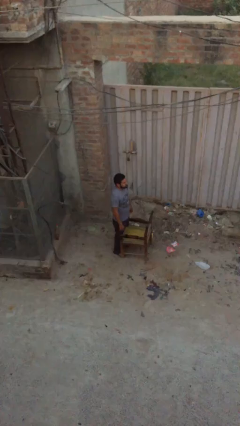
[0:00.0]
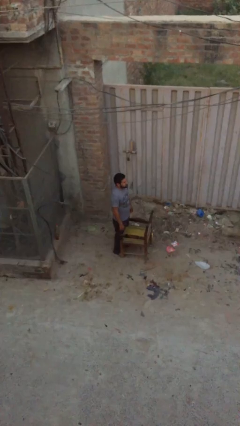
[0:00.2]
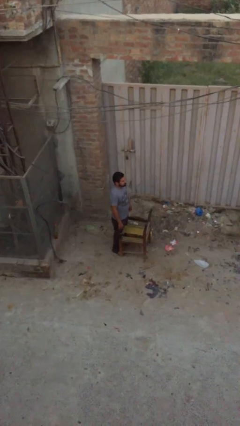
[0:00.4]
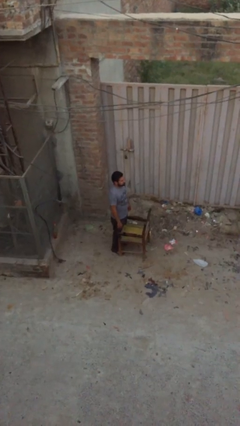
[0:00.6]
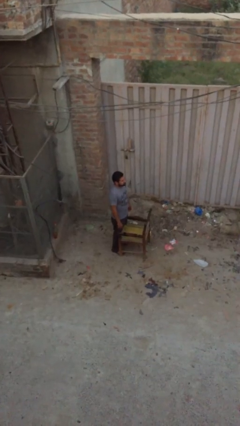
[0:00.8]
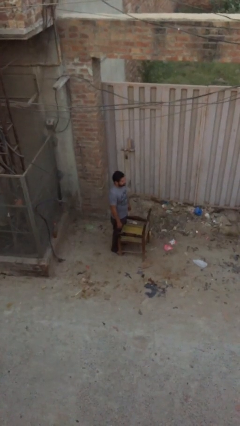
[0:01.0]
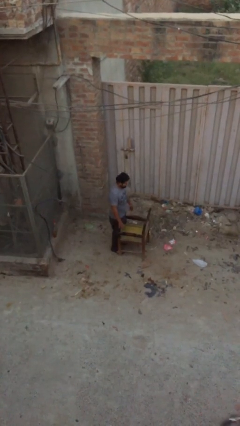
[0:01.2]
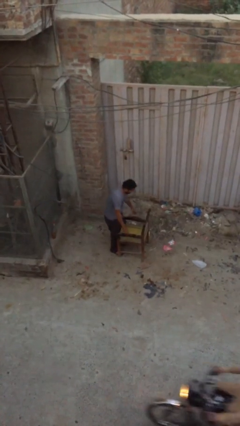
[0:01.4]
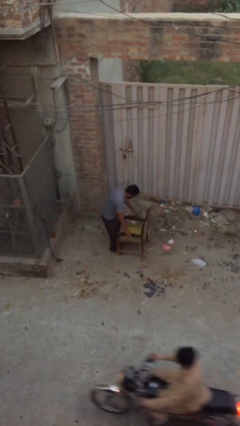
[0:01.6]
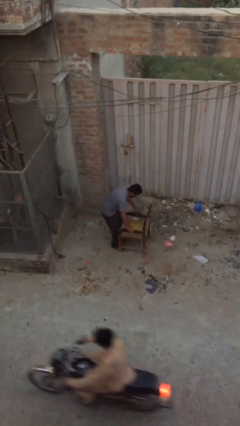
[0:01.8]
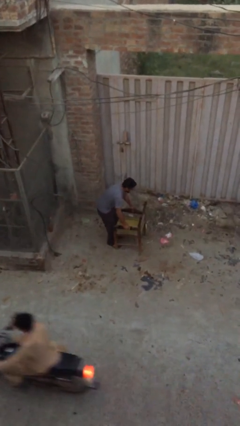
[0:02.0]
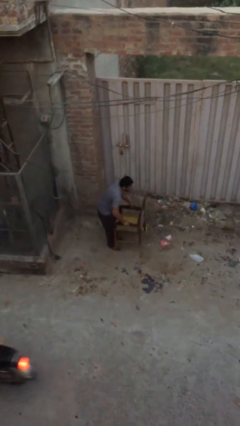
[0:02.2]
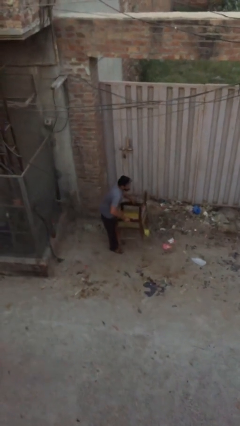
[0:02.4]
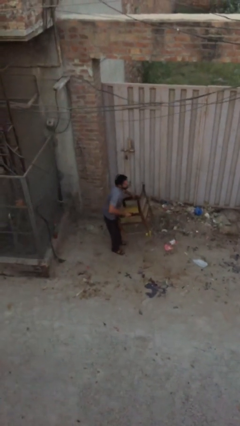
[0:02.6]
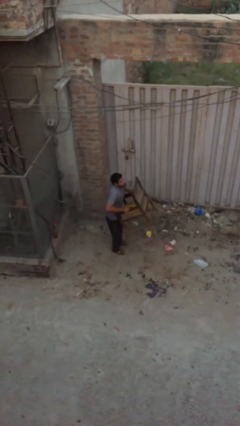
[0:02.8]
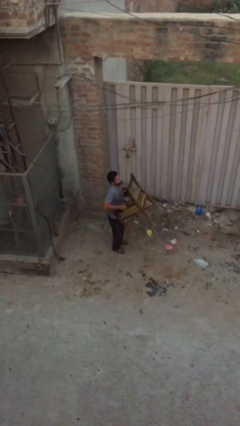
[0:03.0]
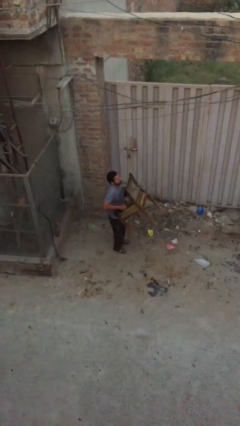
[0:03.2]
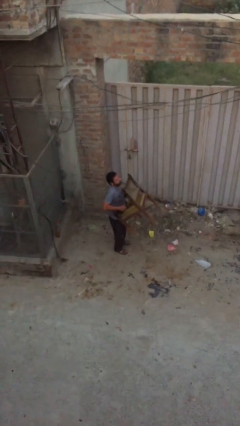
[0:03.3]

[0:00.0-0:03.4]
person picks up object from floor

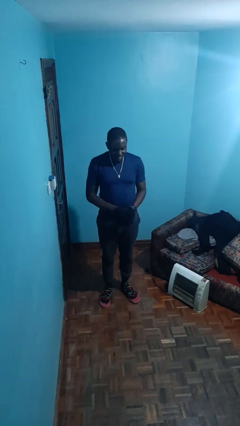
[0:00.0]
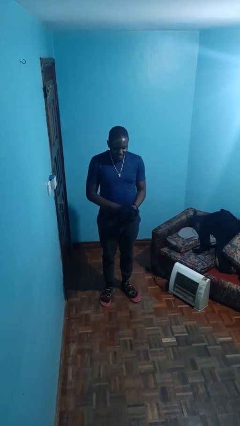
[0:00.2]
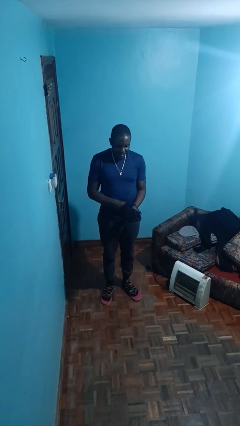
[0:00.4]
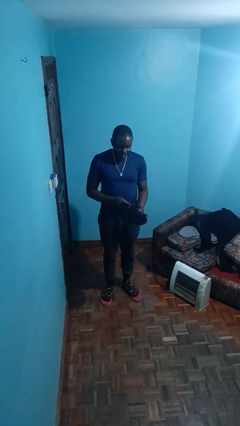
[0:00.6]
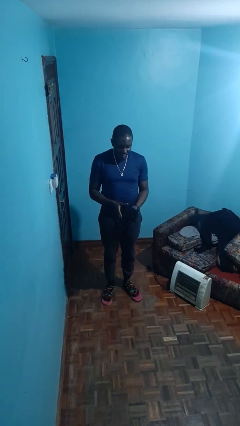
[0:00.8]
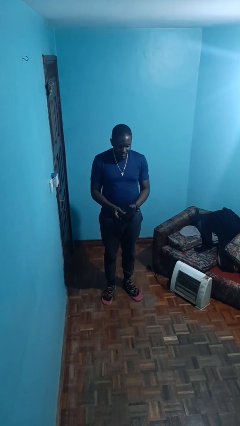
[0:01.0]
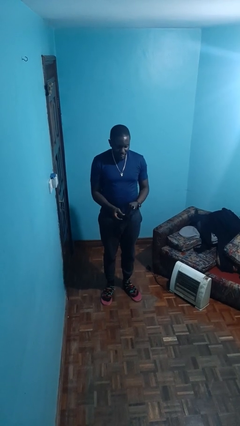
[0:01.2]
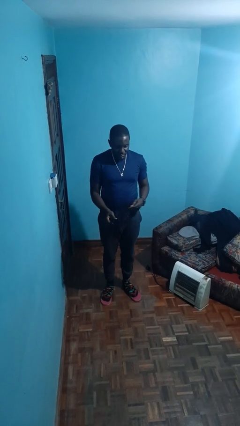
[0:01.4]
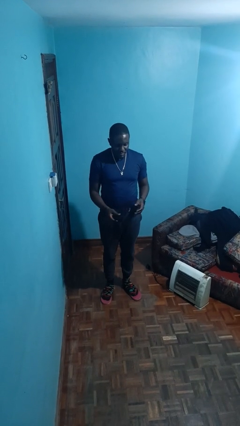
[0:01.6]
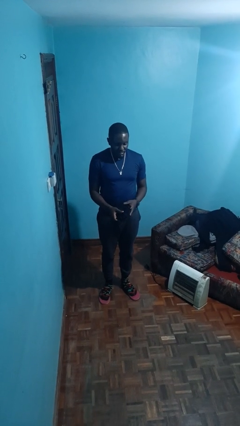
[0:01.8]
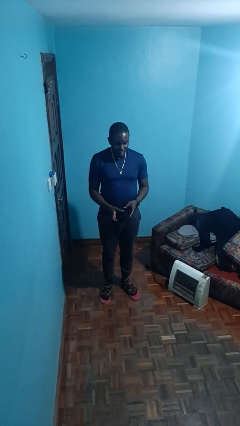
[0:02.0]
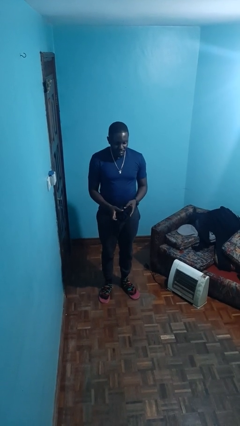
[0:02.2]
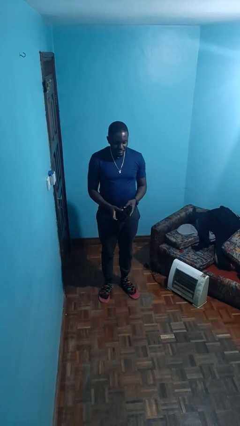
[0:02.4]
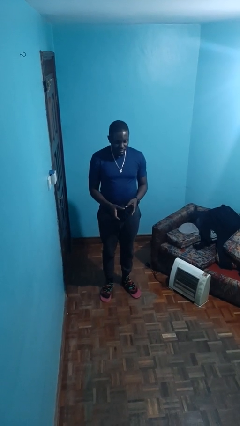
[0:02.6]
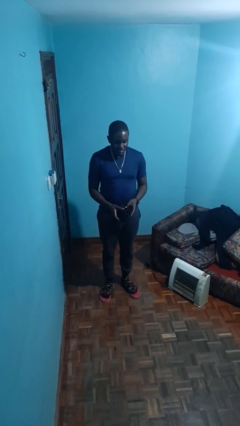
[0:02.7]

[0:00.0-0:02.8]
person takes off gloves

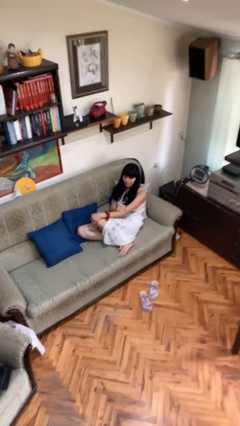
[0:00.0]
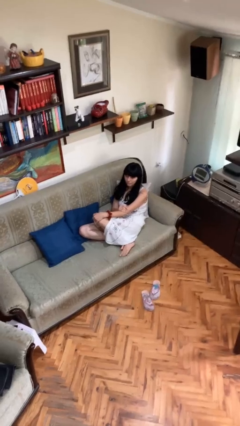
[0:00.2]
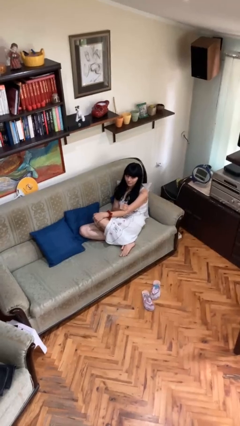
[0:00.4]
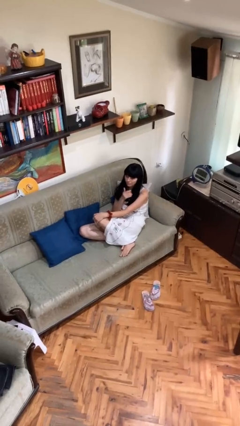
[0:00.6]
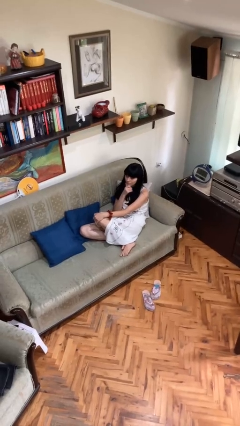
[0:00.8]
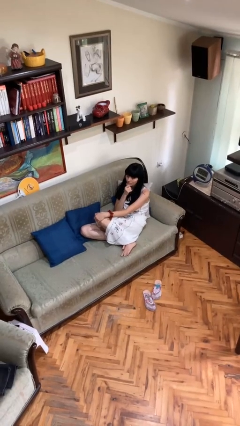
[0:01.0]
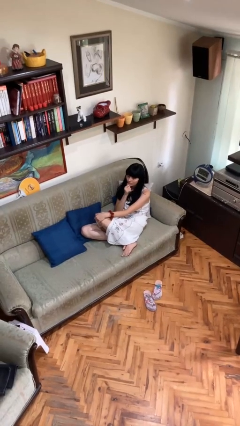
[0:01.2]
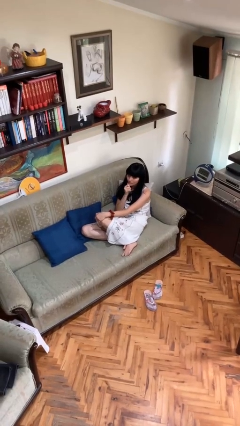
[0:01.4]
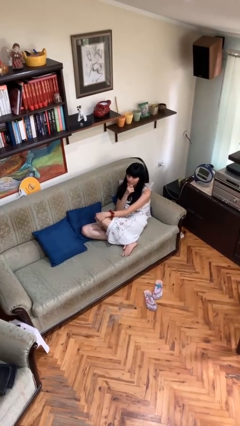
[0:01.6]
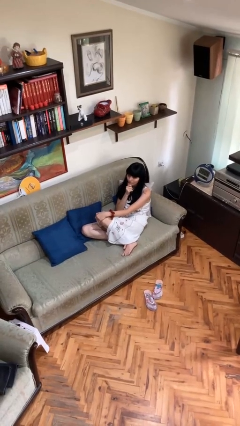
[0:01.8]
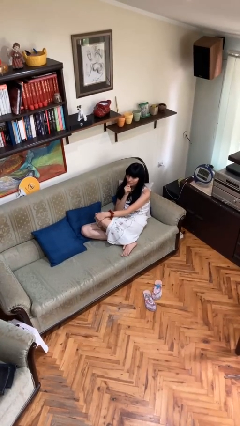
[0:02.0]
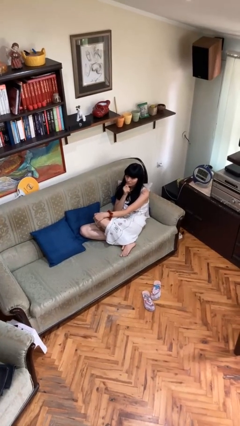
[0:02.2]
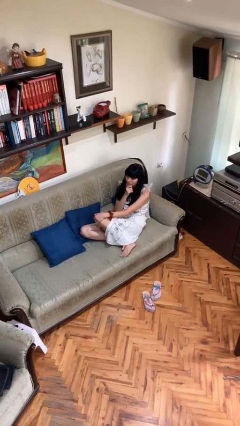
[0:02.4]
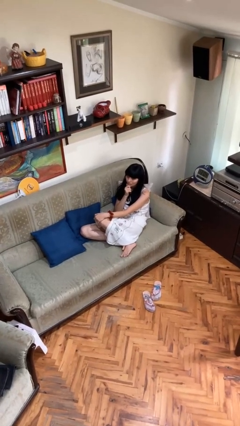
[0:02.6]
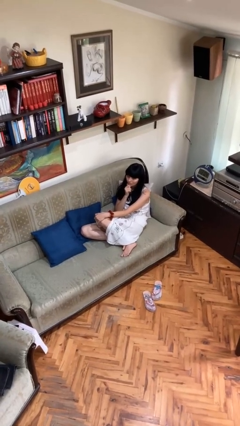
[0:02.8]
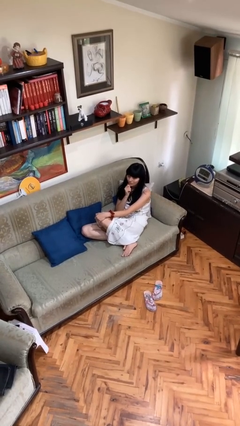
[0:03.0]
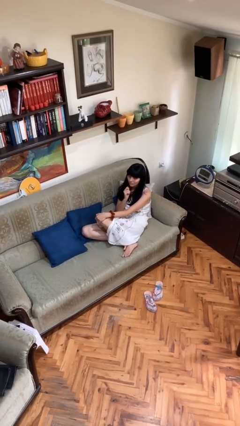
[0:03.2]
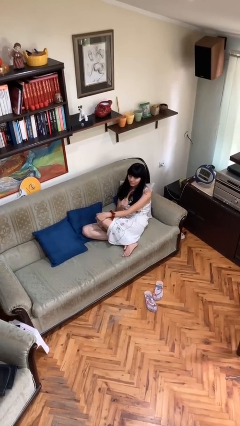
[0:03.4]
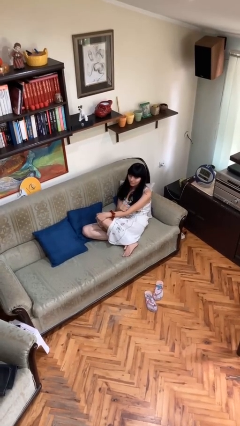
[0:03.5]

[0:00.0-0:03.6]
person strokes chin

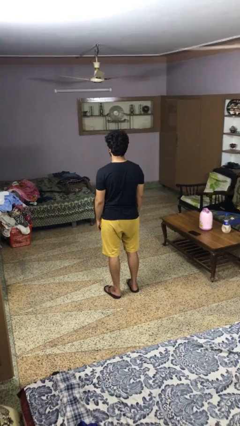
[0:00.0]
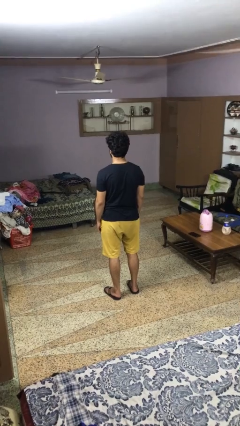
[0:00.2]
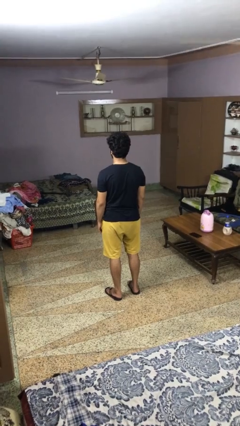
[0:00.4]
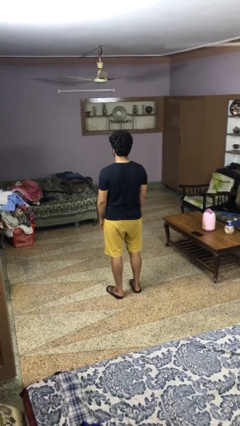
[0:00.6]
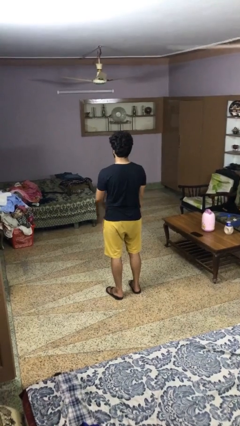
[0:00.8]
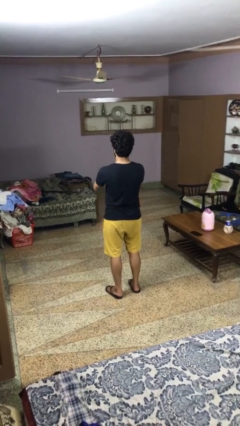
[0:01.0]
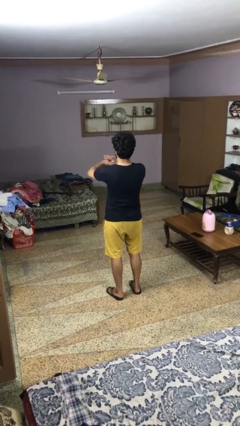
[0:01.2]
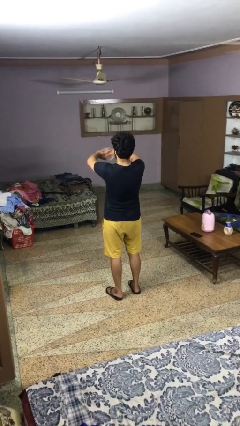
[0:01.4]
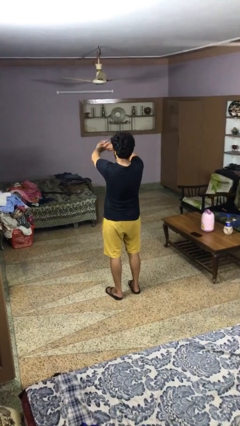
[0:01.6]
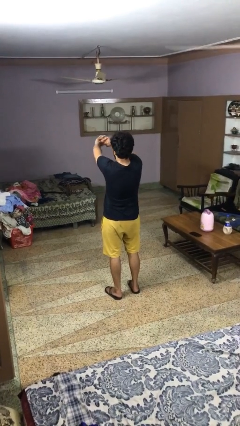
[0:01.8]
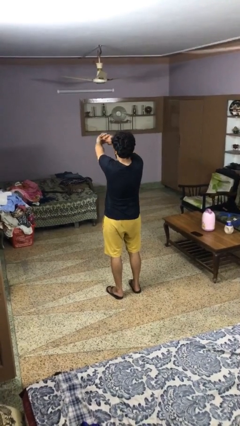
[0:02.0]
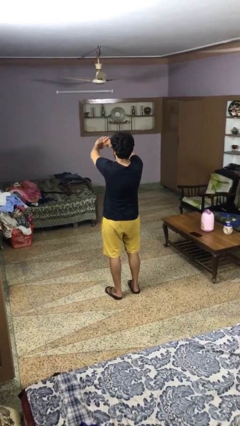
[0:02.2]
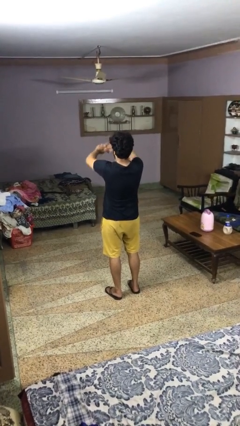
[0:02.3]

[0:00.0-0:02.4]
person cracks knuckles

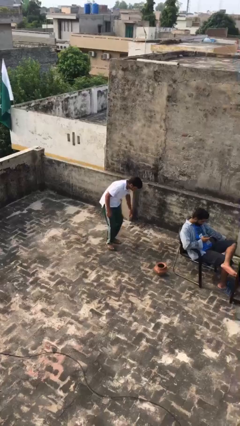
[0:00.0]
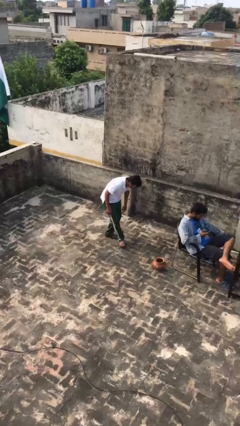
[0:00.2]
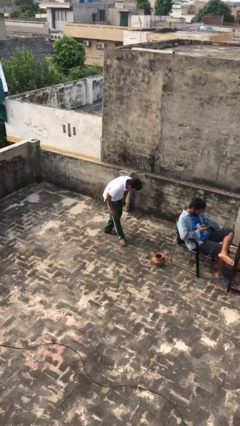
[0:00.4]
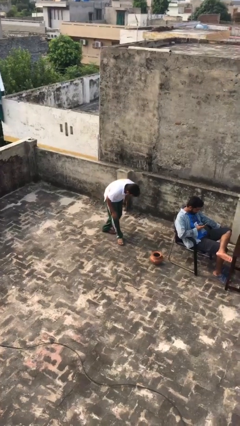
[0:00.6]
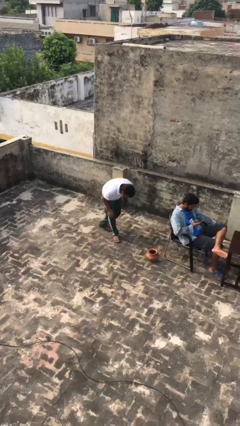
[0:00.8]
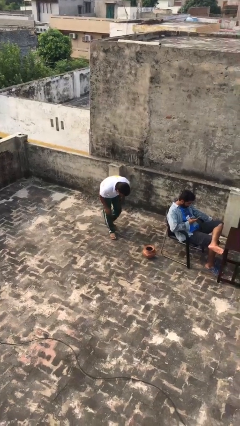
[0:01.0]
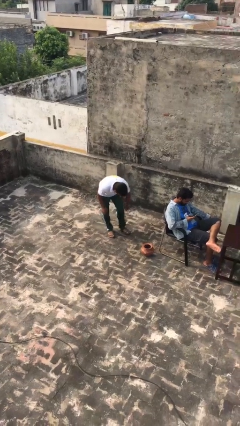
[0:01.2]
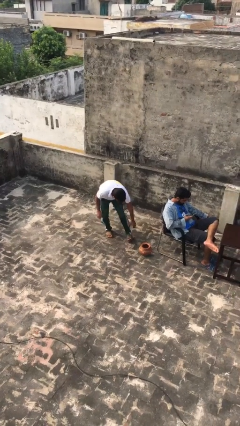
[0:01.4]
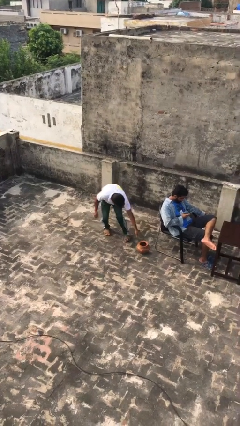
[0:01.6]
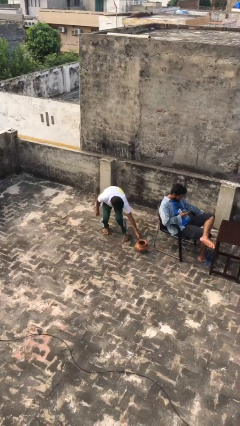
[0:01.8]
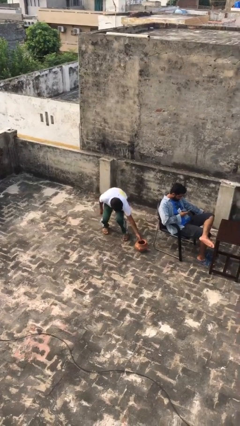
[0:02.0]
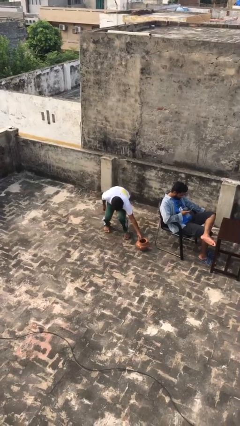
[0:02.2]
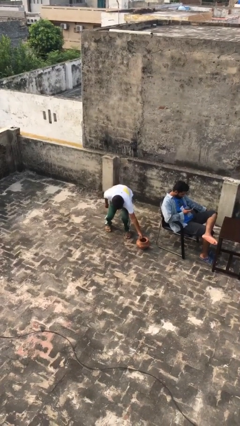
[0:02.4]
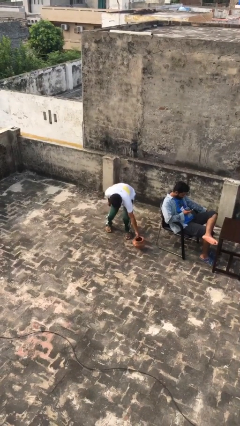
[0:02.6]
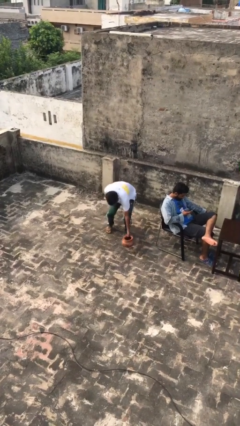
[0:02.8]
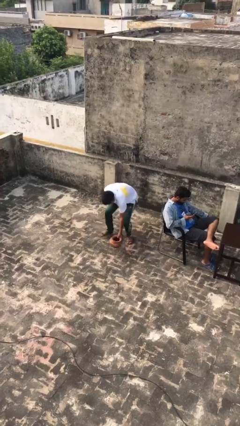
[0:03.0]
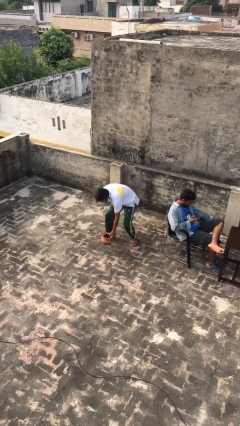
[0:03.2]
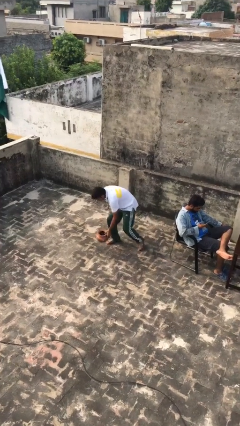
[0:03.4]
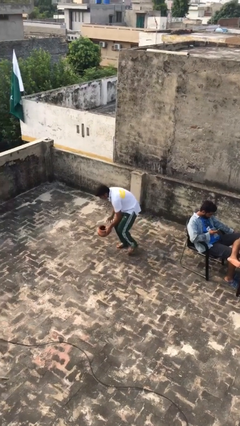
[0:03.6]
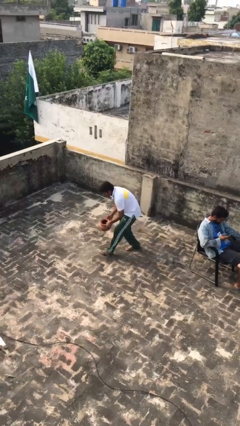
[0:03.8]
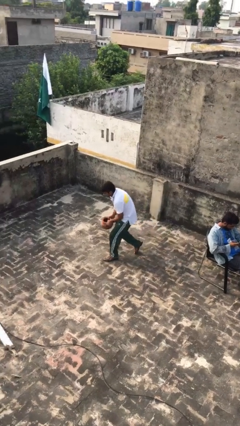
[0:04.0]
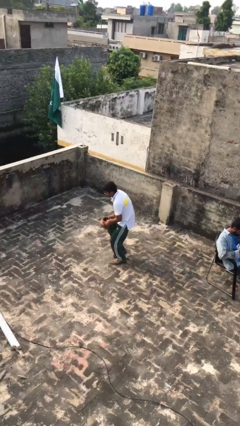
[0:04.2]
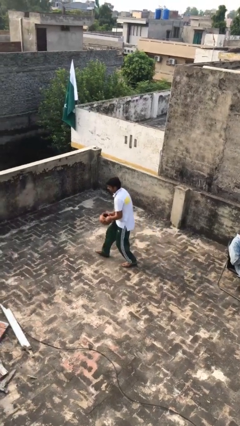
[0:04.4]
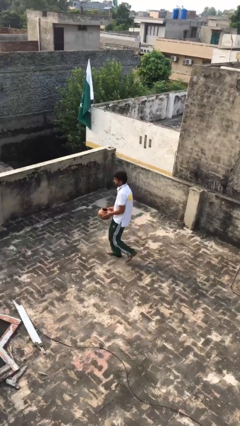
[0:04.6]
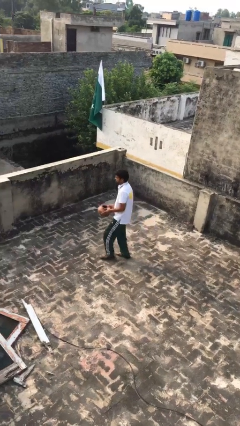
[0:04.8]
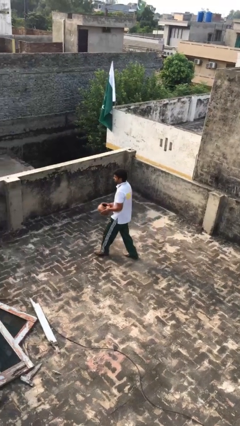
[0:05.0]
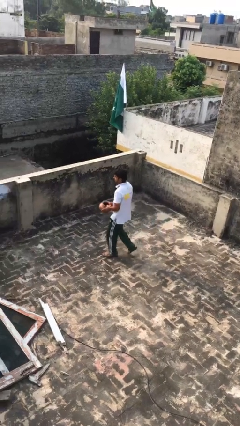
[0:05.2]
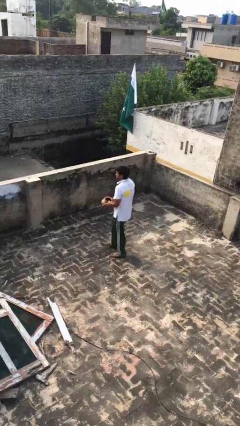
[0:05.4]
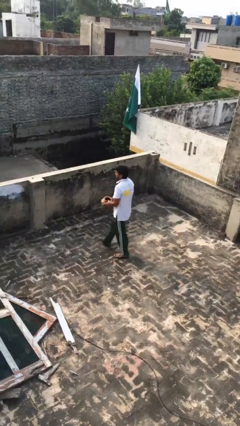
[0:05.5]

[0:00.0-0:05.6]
person steals object from person
